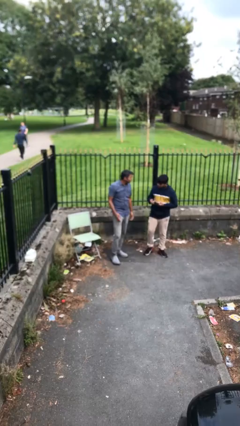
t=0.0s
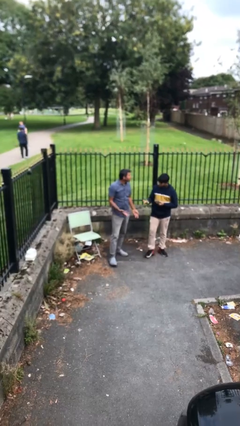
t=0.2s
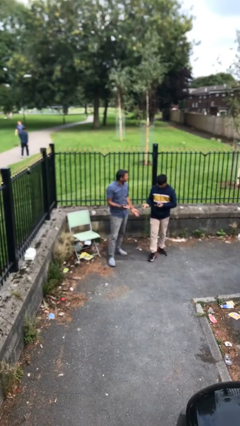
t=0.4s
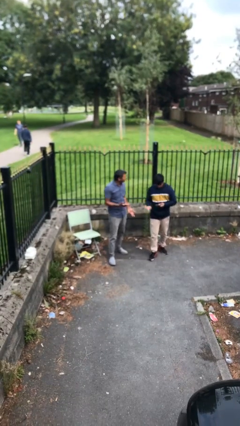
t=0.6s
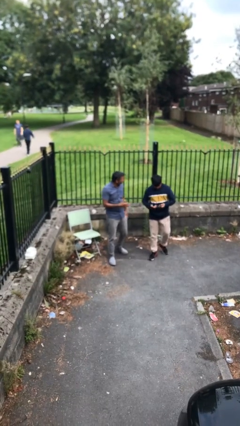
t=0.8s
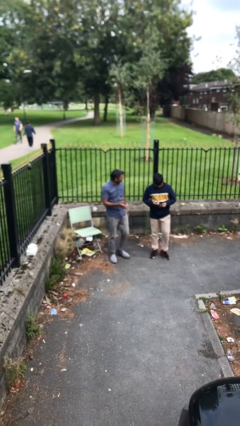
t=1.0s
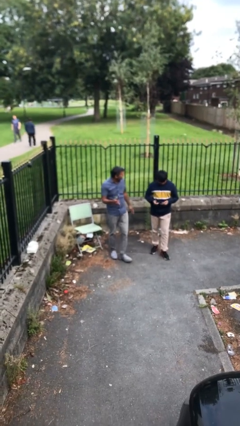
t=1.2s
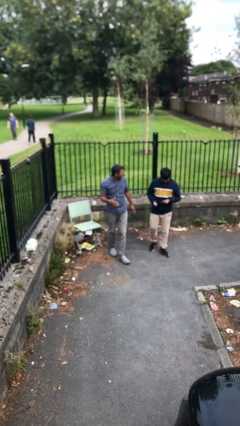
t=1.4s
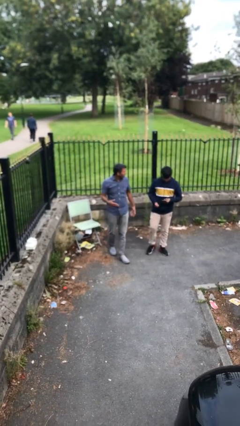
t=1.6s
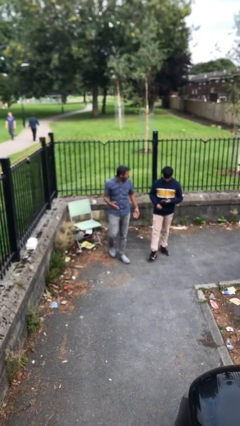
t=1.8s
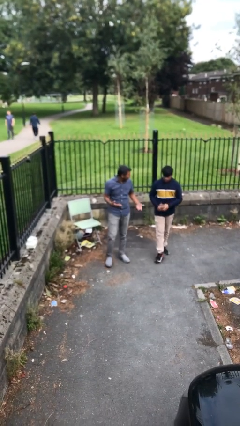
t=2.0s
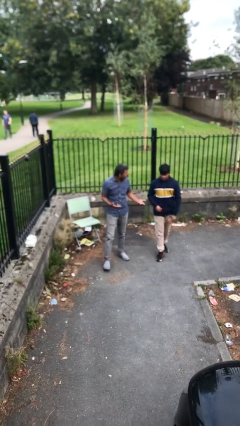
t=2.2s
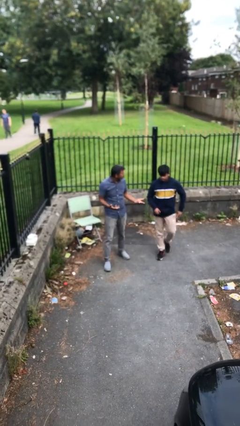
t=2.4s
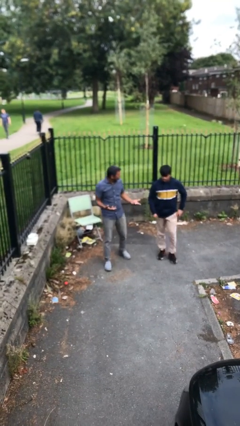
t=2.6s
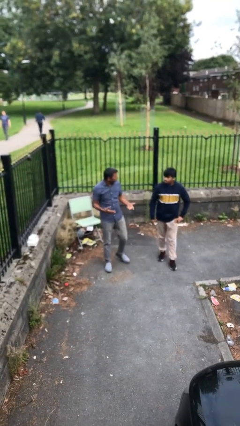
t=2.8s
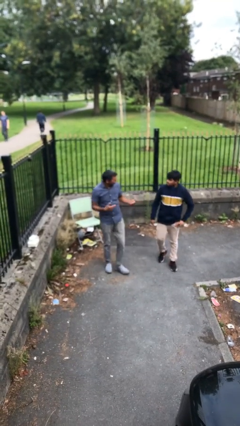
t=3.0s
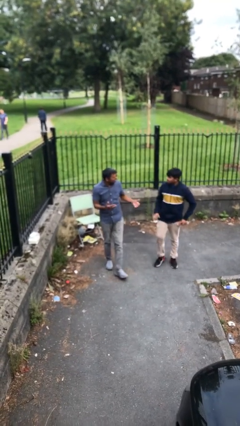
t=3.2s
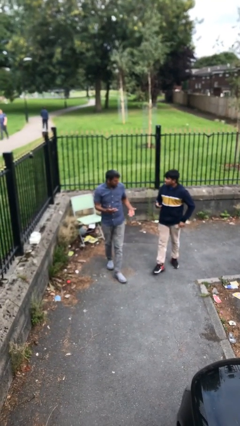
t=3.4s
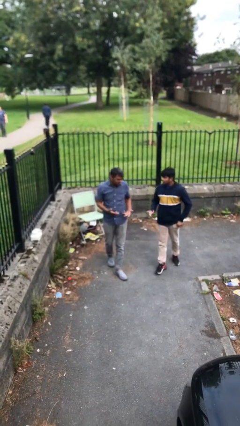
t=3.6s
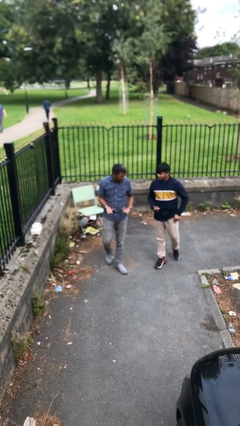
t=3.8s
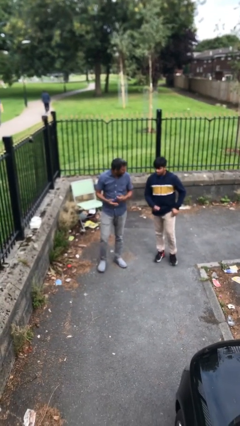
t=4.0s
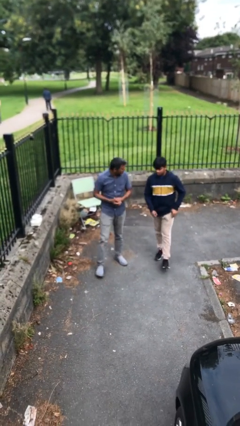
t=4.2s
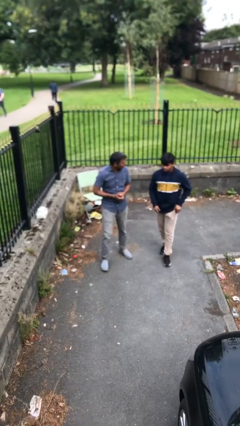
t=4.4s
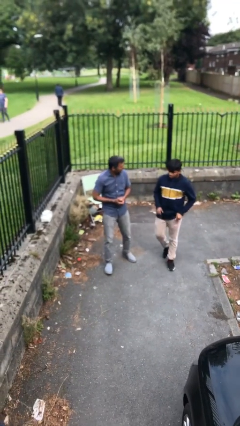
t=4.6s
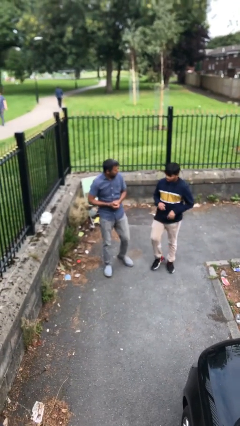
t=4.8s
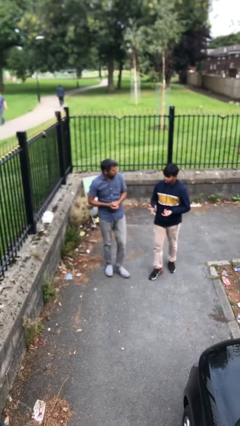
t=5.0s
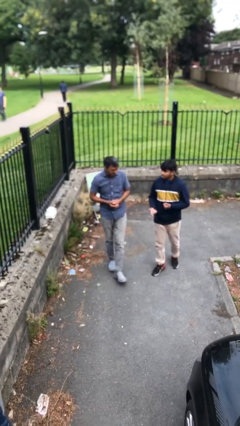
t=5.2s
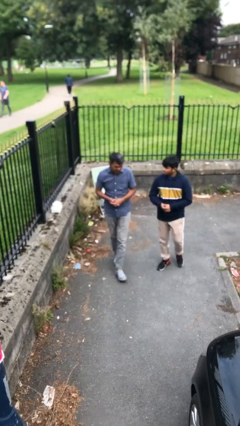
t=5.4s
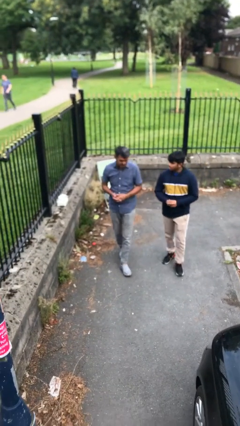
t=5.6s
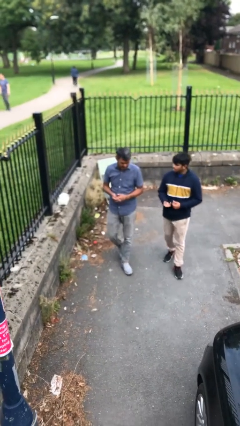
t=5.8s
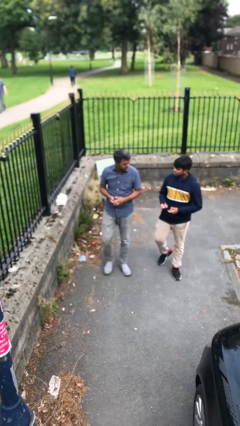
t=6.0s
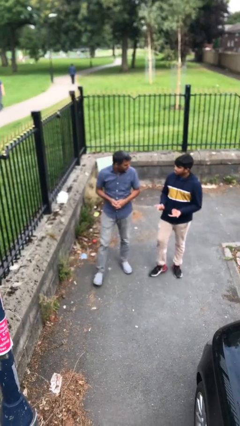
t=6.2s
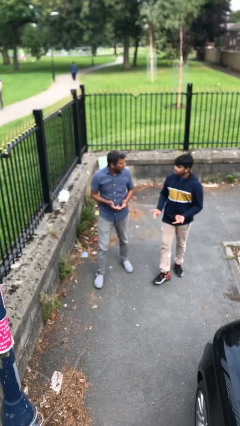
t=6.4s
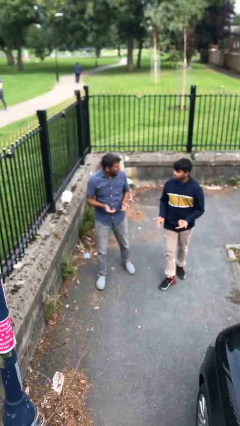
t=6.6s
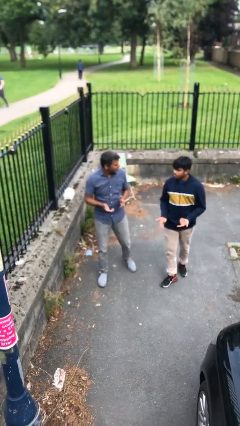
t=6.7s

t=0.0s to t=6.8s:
person talks to person

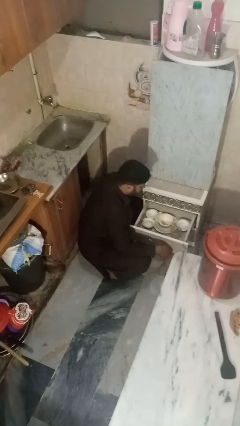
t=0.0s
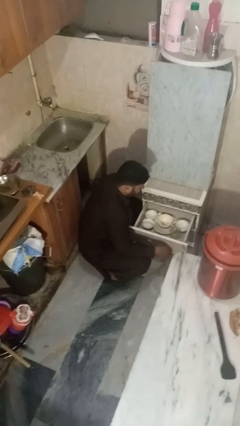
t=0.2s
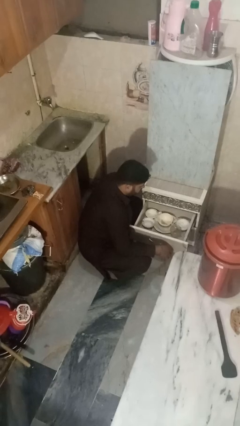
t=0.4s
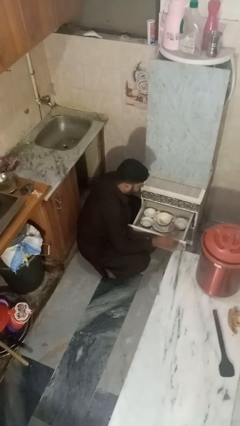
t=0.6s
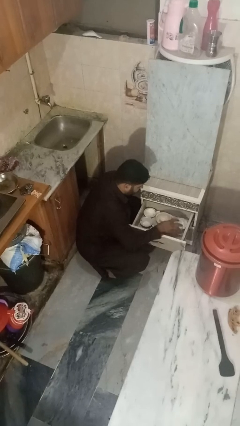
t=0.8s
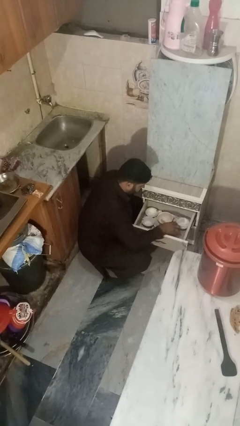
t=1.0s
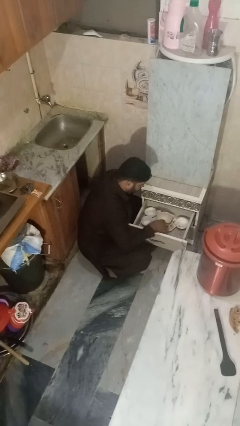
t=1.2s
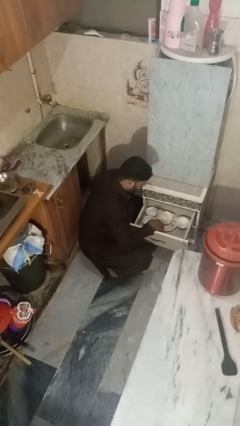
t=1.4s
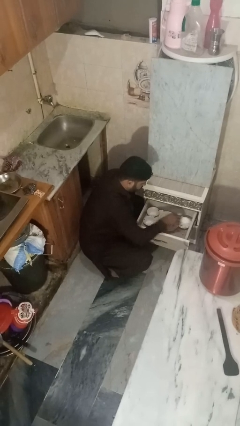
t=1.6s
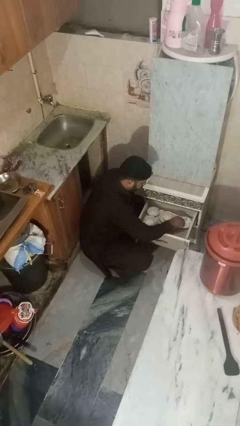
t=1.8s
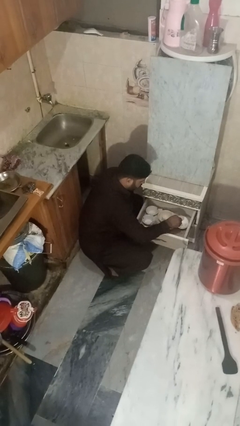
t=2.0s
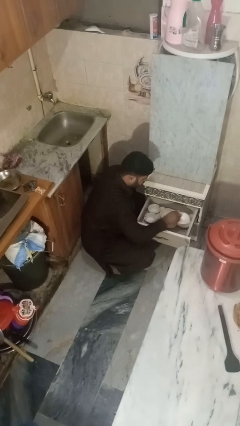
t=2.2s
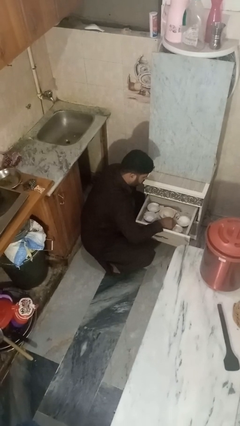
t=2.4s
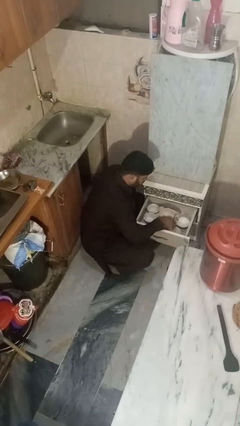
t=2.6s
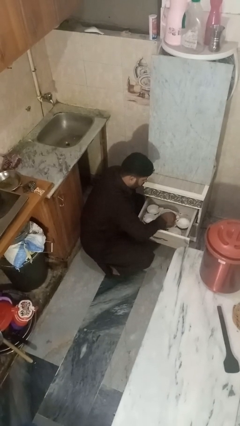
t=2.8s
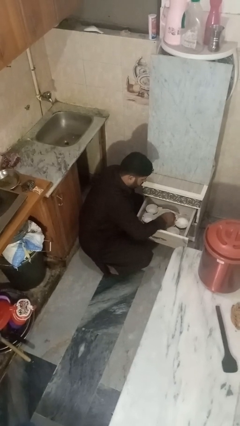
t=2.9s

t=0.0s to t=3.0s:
person searches in kitchen drawer

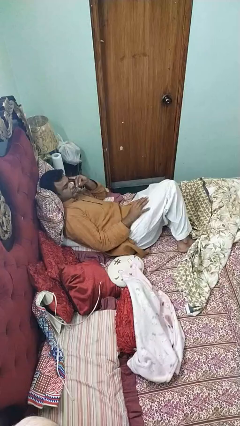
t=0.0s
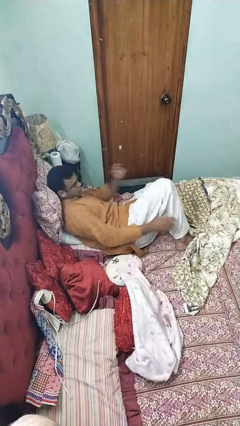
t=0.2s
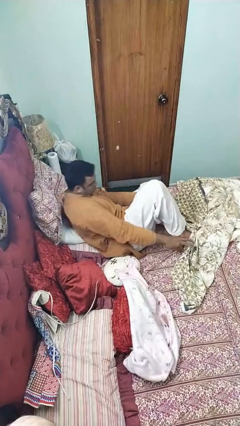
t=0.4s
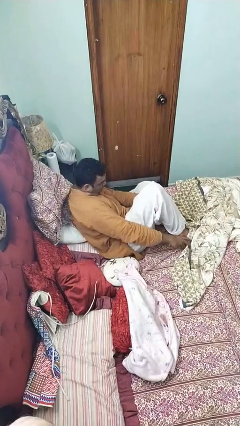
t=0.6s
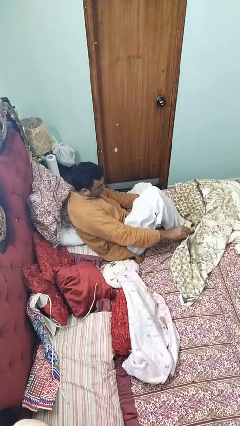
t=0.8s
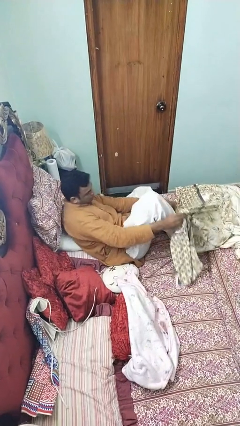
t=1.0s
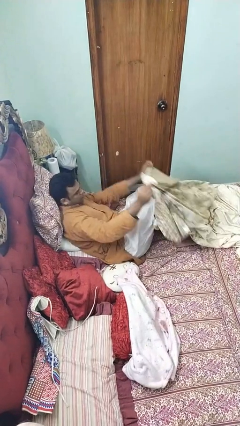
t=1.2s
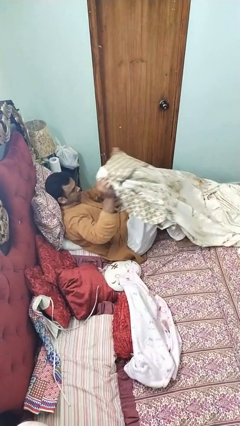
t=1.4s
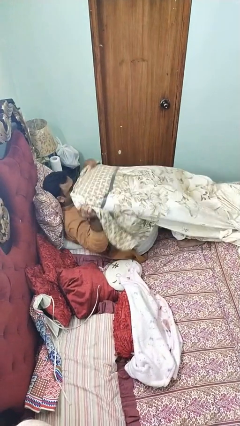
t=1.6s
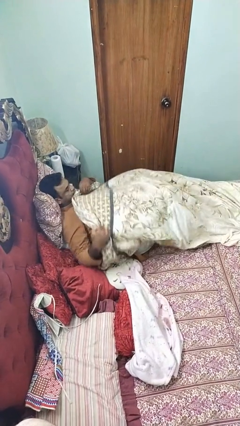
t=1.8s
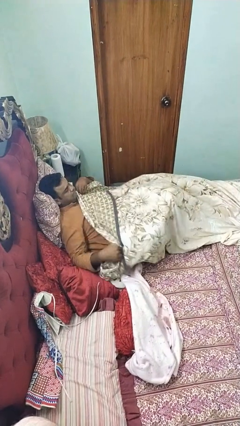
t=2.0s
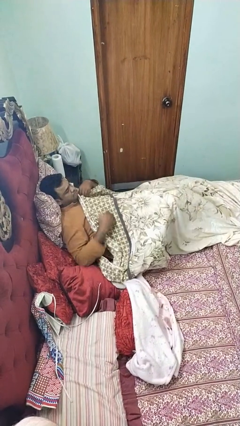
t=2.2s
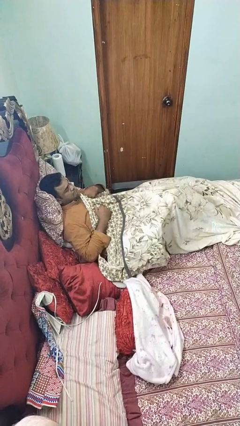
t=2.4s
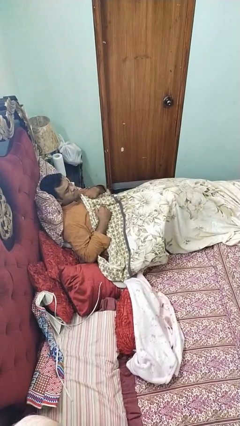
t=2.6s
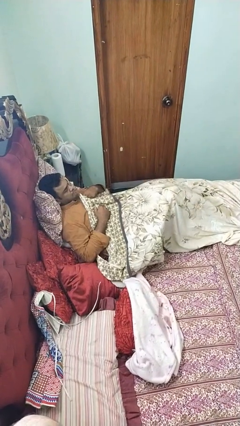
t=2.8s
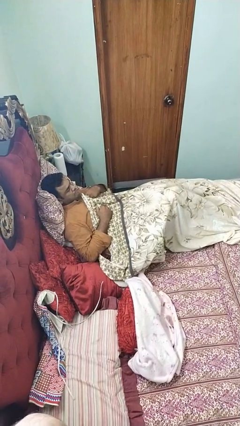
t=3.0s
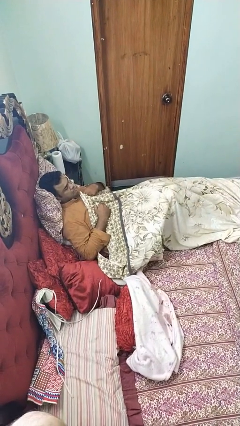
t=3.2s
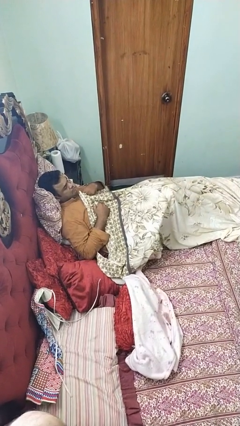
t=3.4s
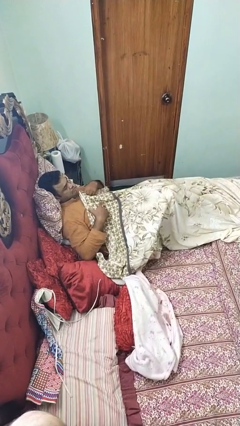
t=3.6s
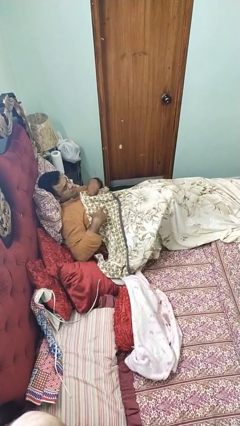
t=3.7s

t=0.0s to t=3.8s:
person covers with bedsheets

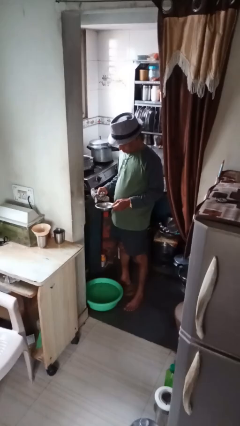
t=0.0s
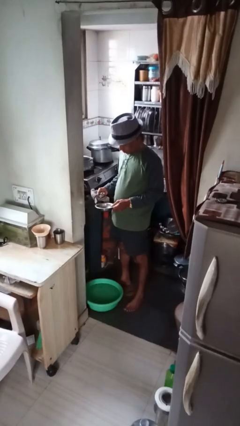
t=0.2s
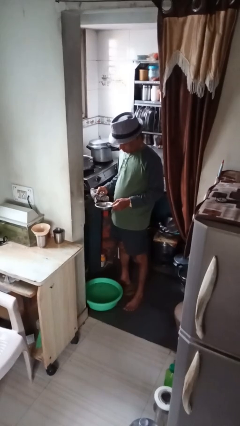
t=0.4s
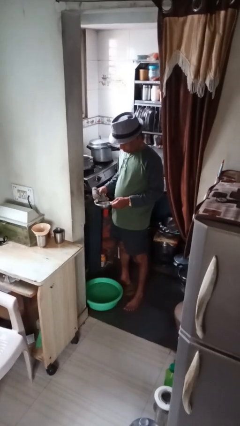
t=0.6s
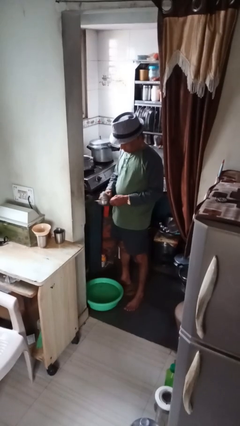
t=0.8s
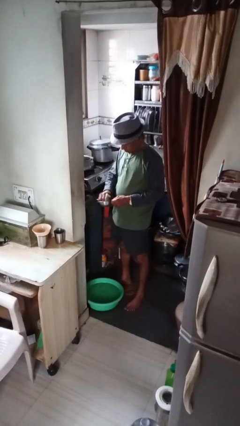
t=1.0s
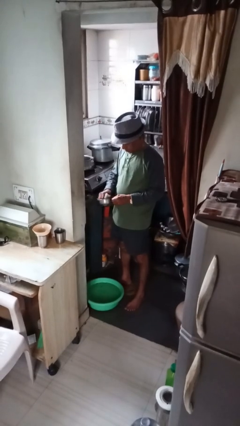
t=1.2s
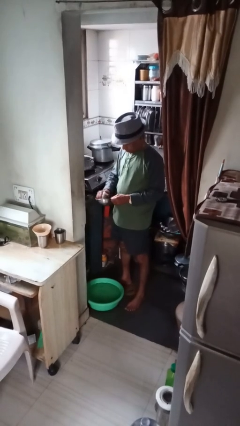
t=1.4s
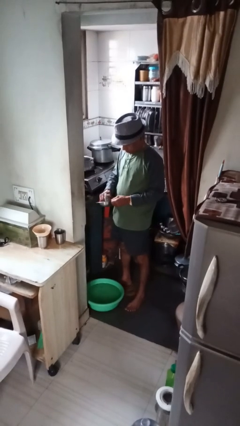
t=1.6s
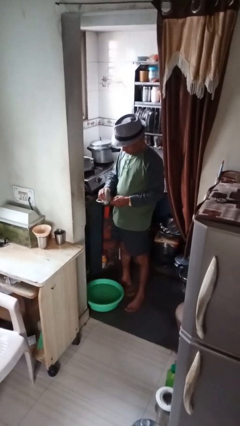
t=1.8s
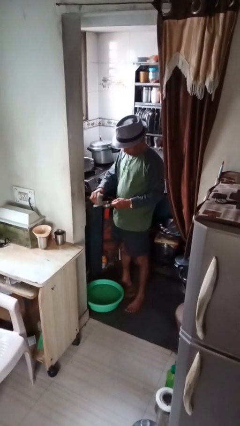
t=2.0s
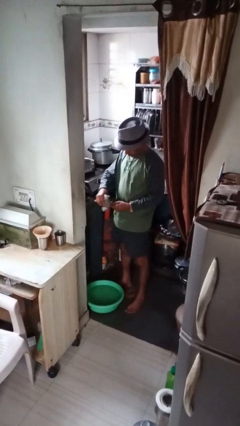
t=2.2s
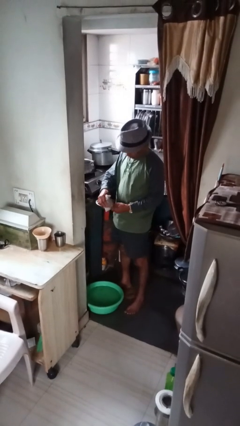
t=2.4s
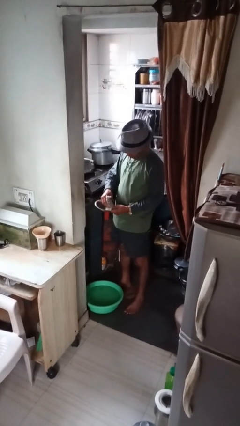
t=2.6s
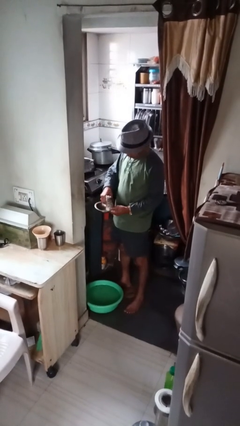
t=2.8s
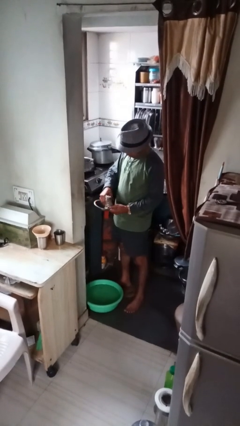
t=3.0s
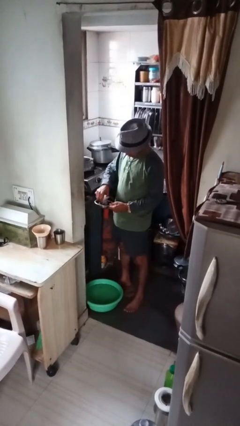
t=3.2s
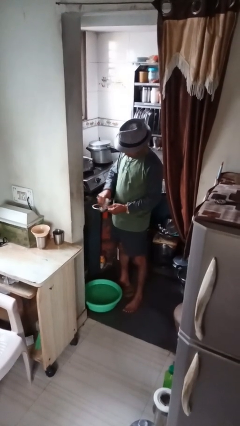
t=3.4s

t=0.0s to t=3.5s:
person dries dish

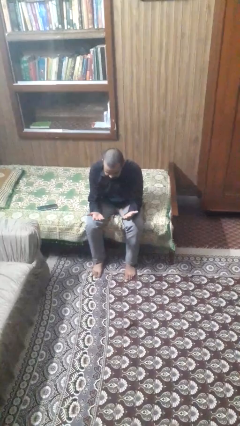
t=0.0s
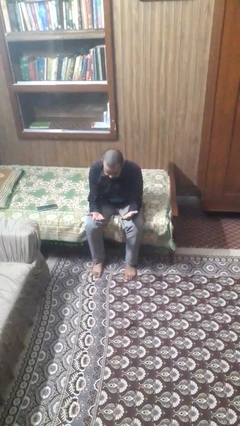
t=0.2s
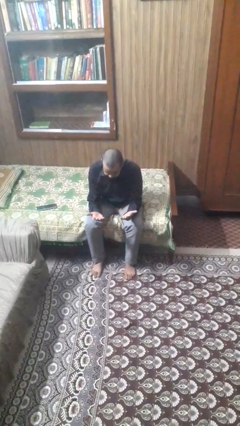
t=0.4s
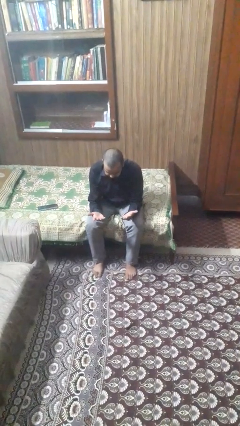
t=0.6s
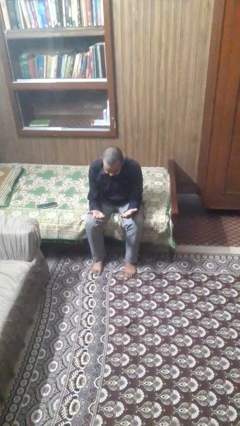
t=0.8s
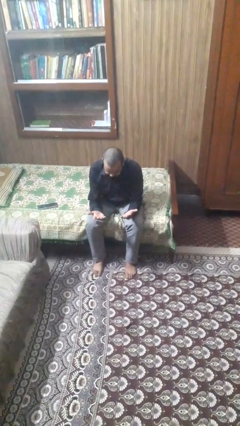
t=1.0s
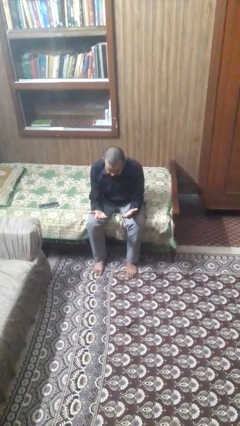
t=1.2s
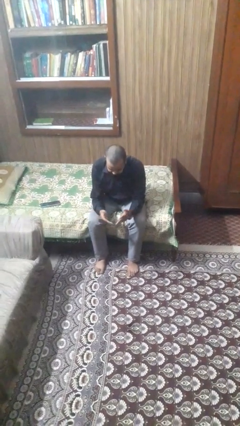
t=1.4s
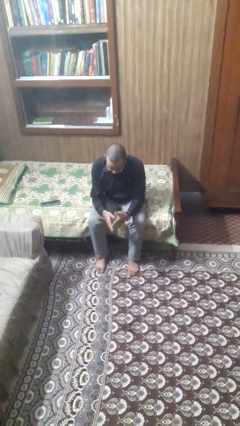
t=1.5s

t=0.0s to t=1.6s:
person looks at hands in lap
